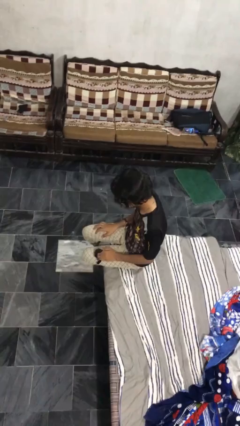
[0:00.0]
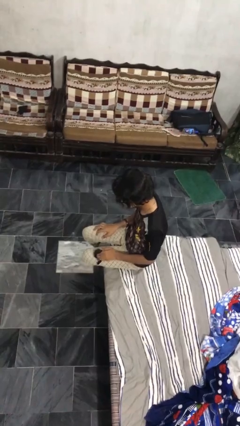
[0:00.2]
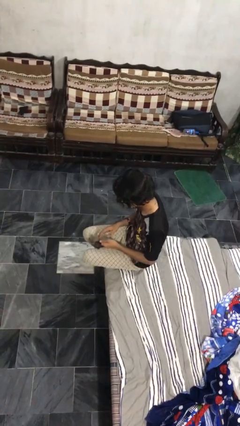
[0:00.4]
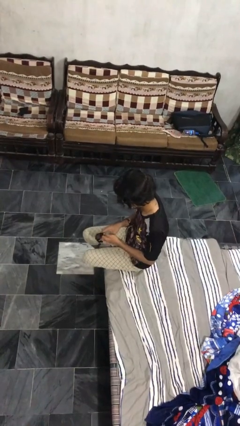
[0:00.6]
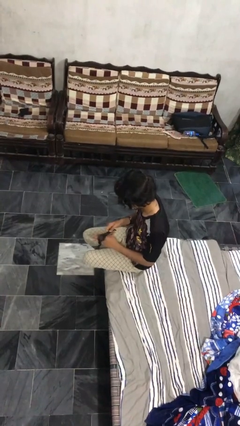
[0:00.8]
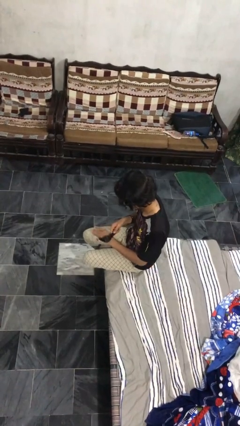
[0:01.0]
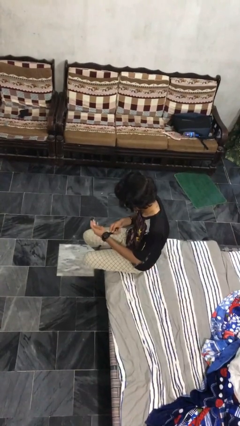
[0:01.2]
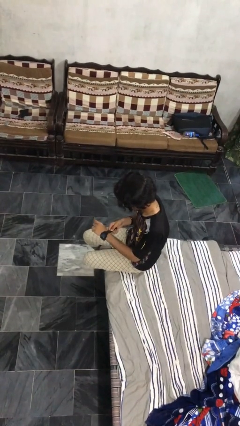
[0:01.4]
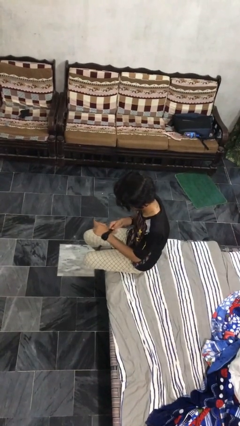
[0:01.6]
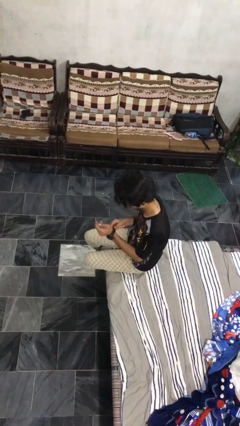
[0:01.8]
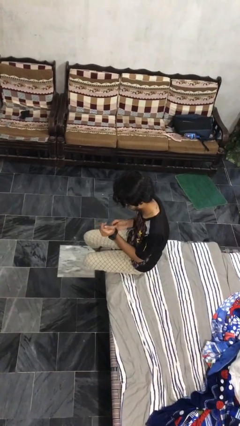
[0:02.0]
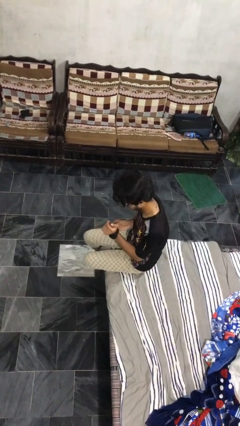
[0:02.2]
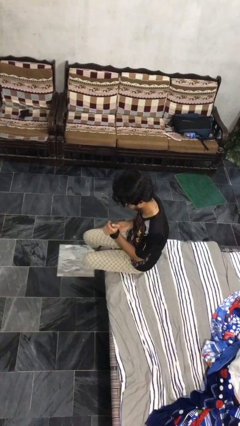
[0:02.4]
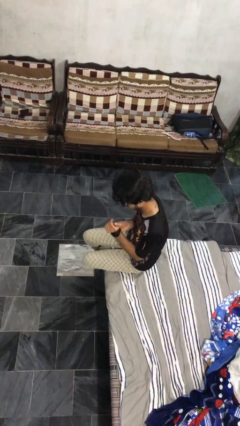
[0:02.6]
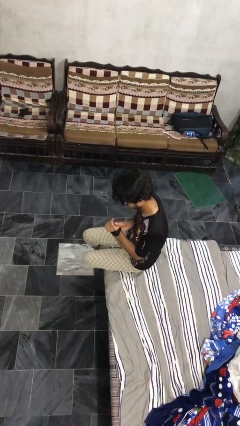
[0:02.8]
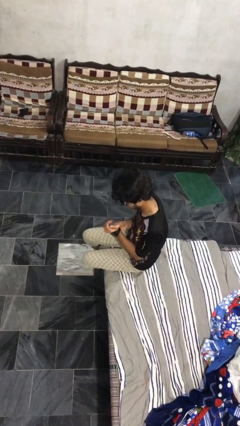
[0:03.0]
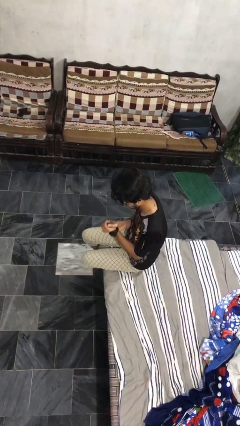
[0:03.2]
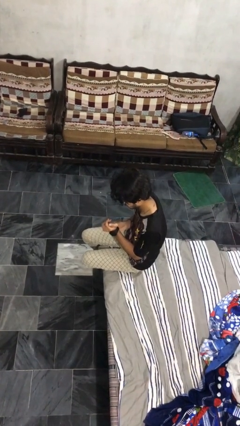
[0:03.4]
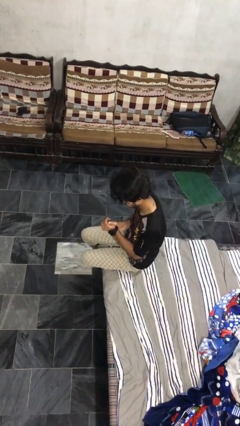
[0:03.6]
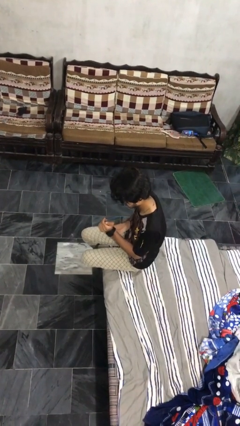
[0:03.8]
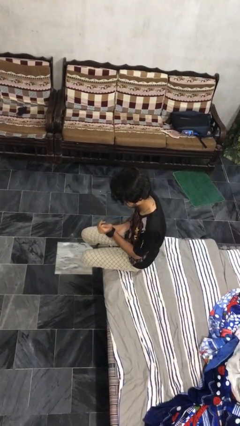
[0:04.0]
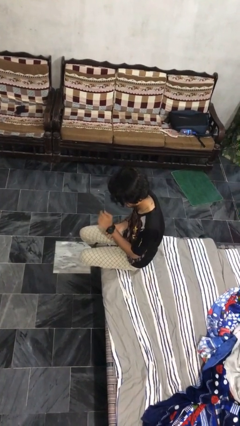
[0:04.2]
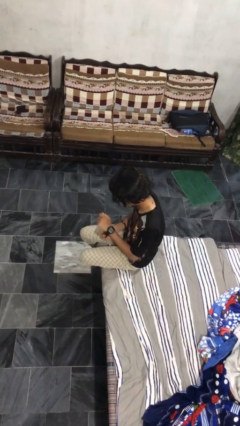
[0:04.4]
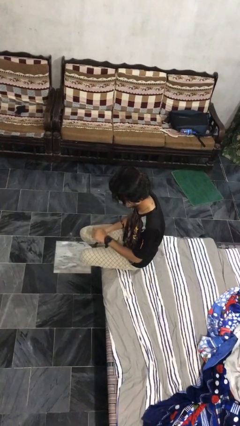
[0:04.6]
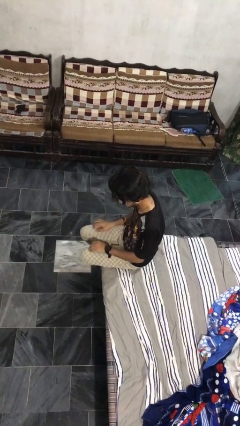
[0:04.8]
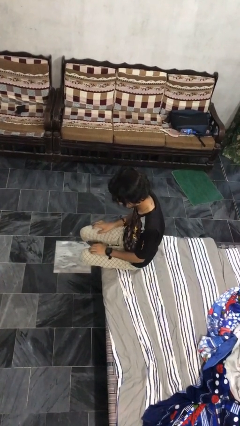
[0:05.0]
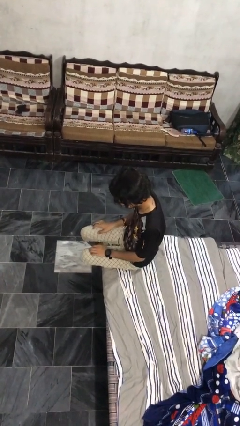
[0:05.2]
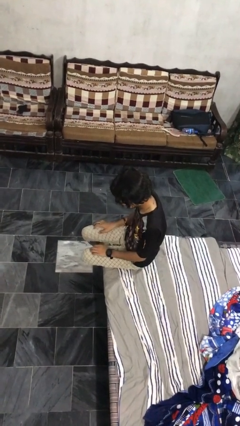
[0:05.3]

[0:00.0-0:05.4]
person puts on wristwatch

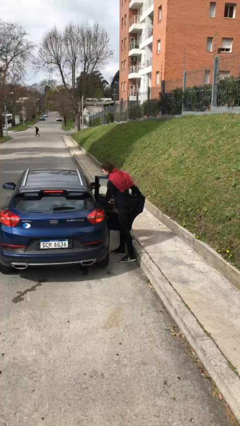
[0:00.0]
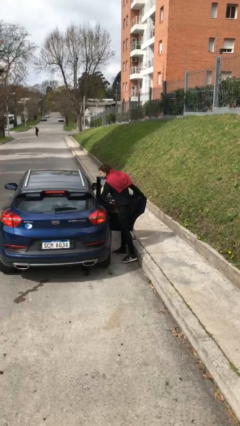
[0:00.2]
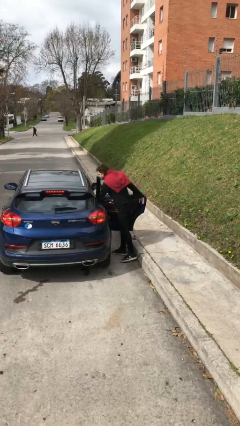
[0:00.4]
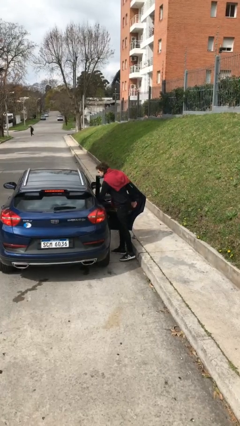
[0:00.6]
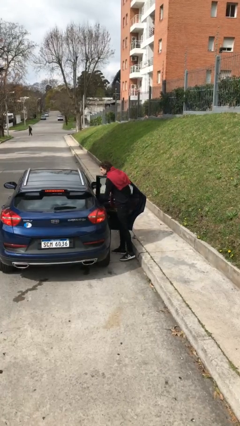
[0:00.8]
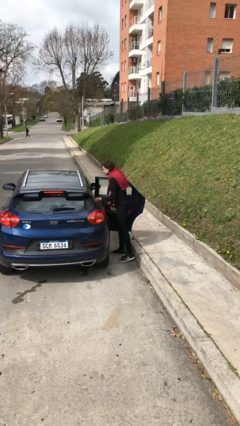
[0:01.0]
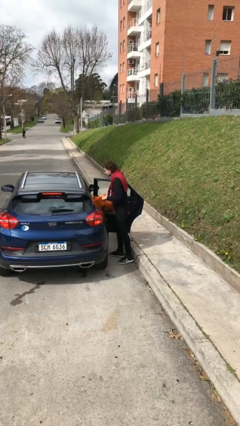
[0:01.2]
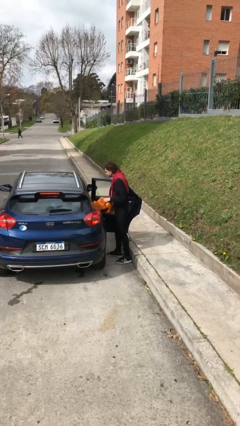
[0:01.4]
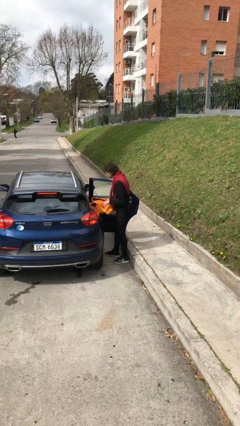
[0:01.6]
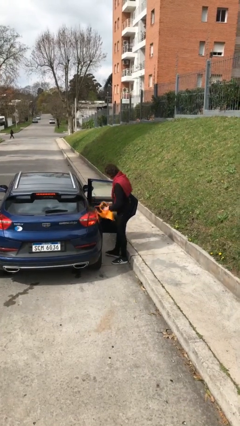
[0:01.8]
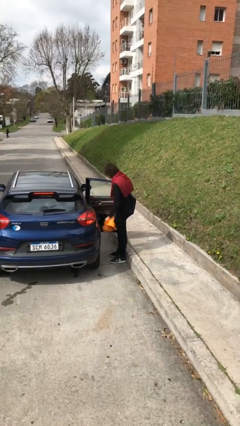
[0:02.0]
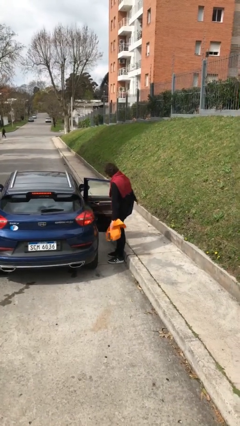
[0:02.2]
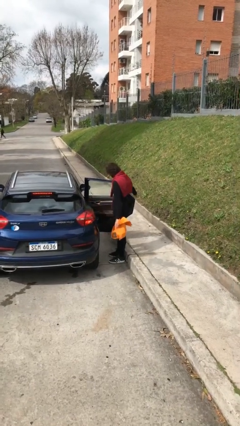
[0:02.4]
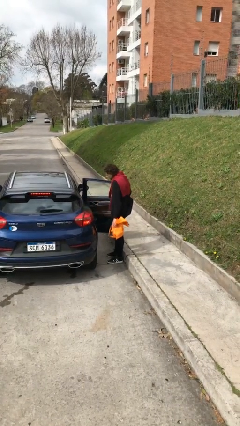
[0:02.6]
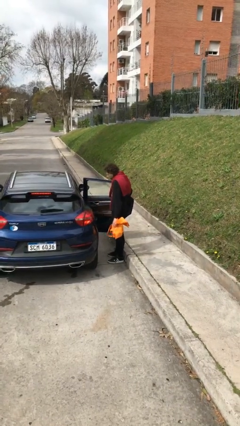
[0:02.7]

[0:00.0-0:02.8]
person unloads car

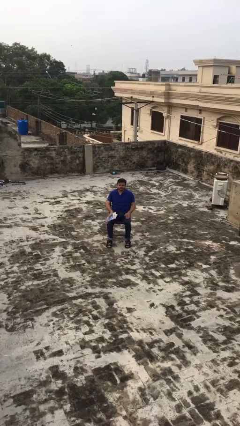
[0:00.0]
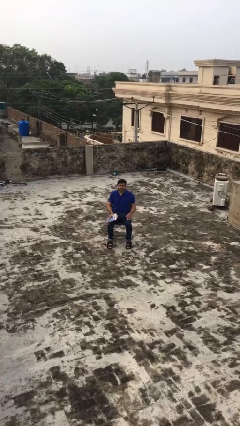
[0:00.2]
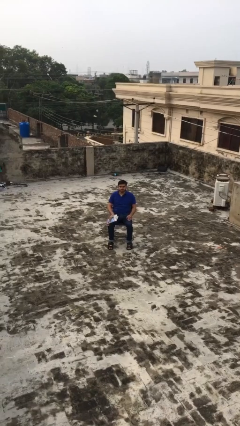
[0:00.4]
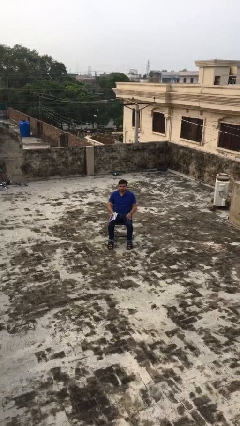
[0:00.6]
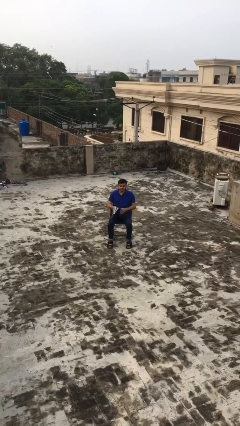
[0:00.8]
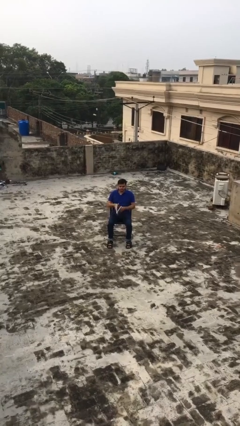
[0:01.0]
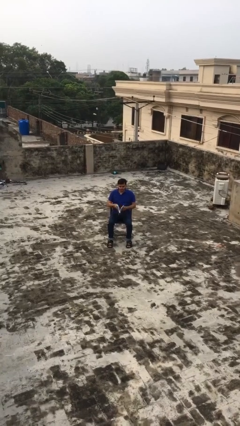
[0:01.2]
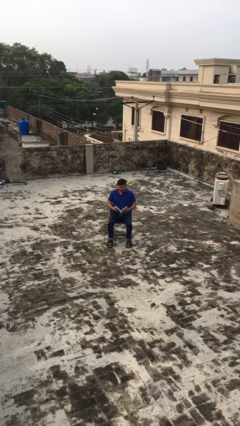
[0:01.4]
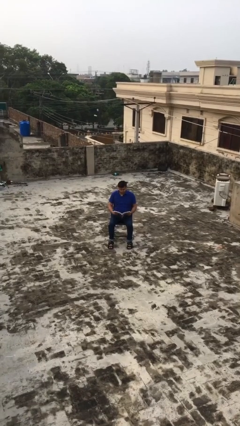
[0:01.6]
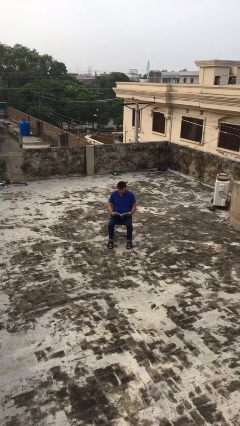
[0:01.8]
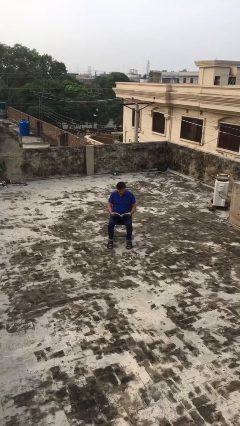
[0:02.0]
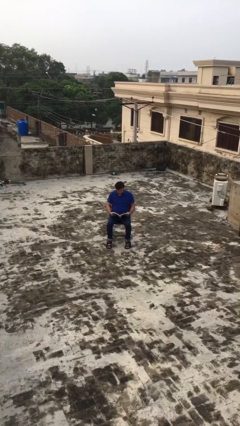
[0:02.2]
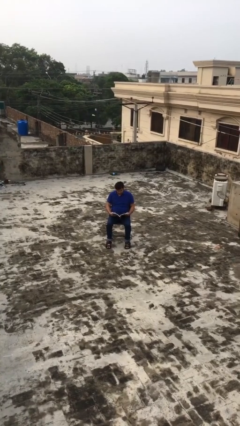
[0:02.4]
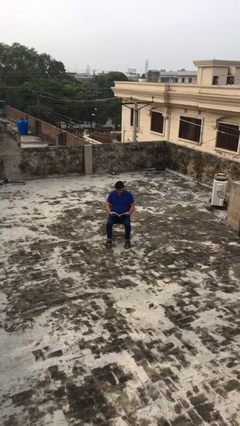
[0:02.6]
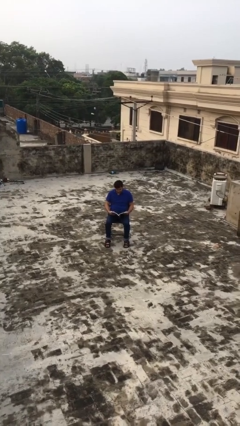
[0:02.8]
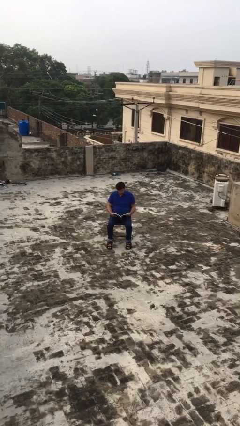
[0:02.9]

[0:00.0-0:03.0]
person reads document

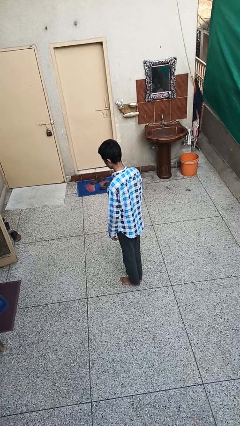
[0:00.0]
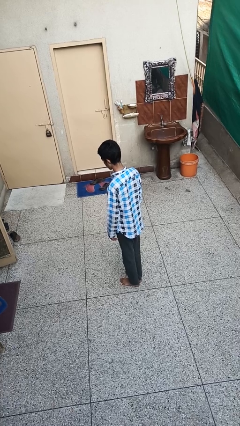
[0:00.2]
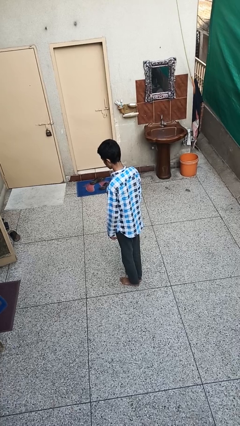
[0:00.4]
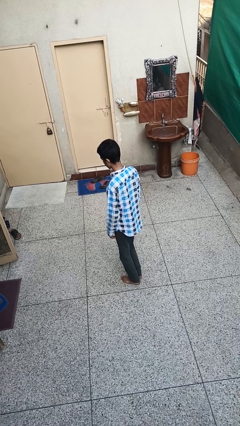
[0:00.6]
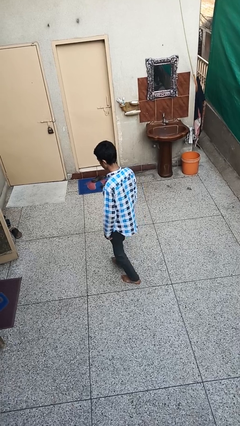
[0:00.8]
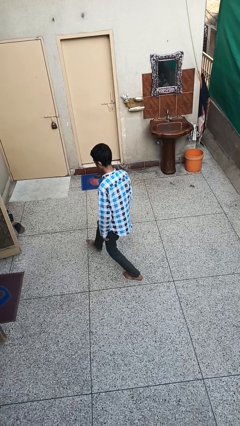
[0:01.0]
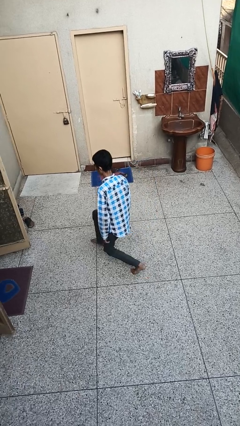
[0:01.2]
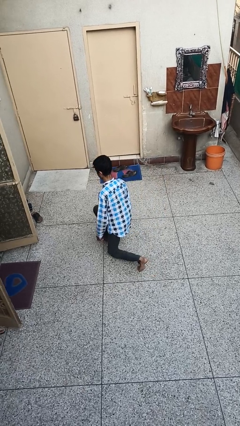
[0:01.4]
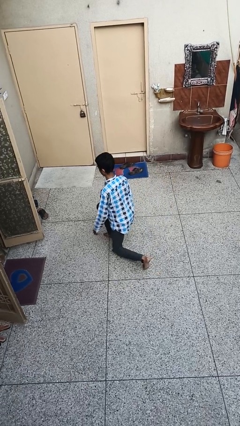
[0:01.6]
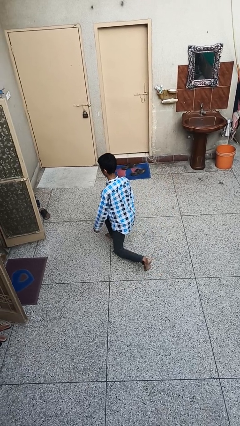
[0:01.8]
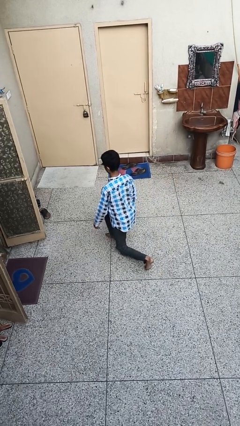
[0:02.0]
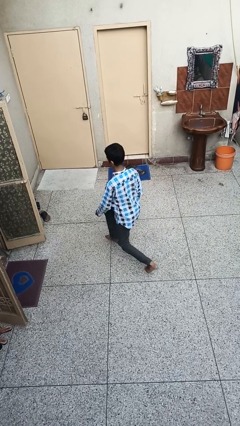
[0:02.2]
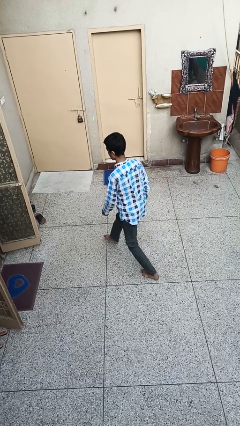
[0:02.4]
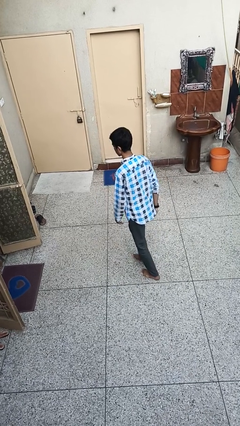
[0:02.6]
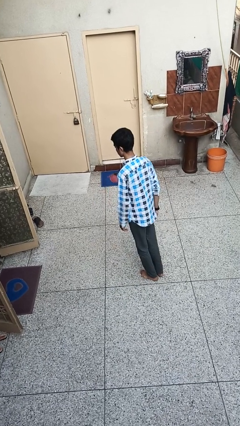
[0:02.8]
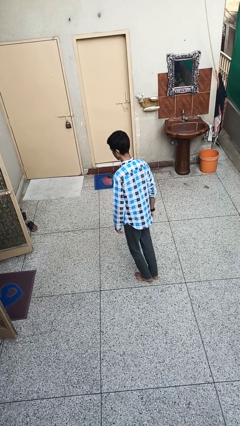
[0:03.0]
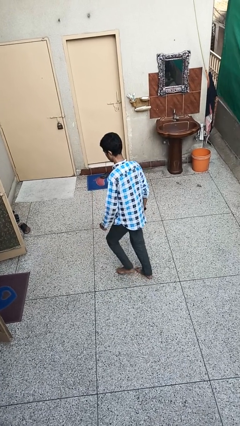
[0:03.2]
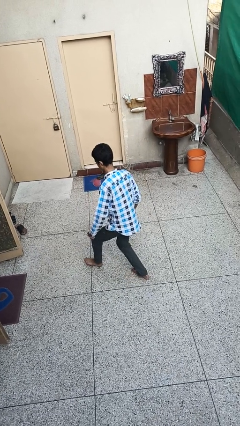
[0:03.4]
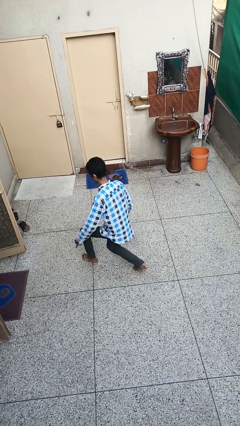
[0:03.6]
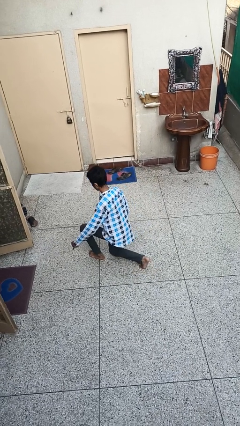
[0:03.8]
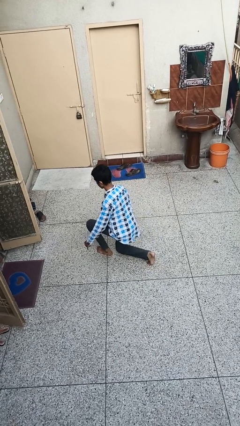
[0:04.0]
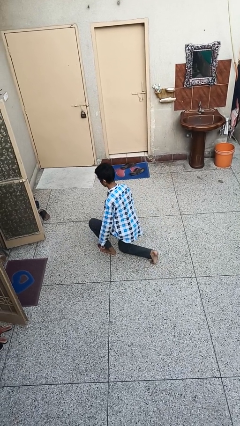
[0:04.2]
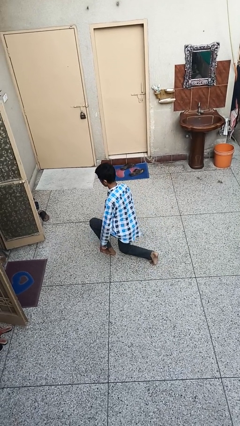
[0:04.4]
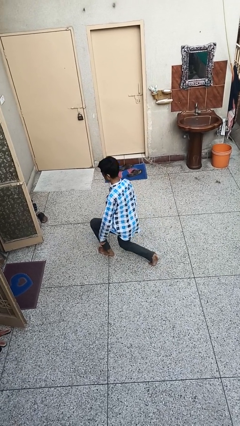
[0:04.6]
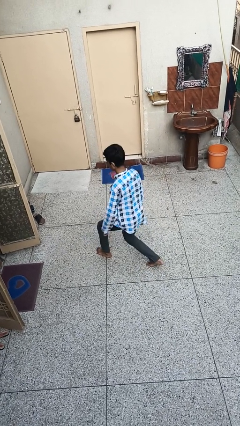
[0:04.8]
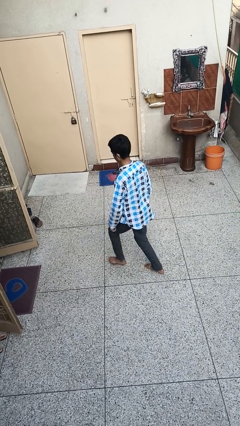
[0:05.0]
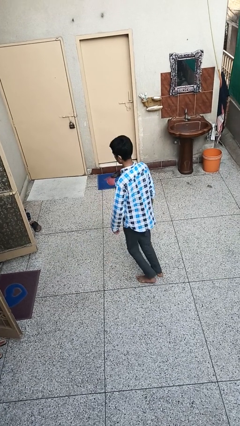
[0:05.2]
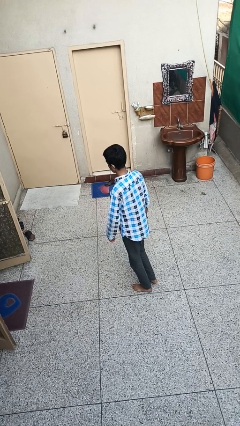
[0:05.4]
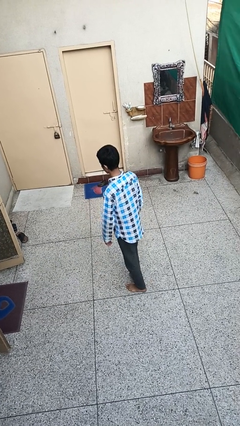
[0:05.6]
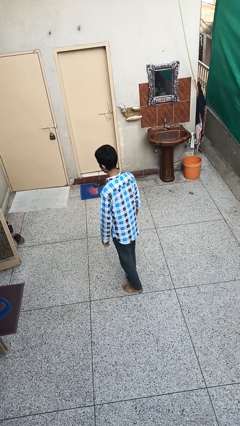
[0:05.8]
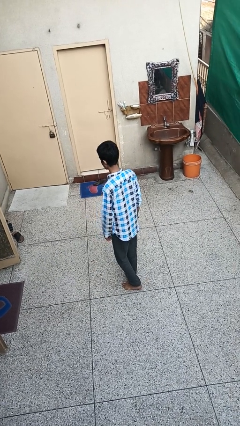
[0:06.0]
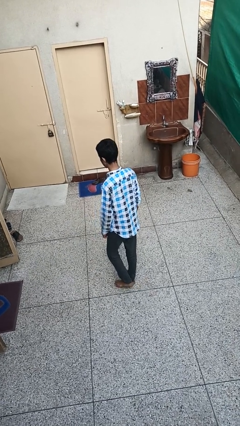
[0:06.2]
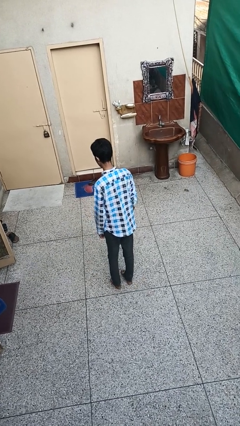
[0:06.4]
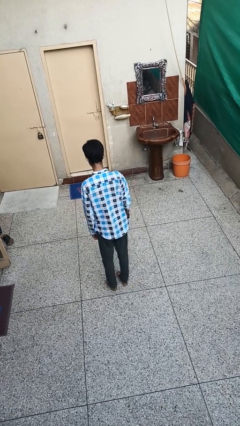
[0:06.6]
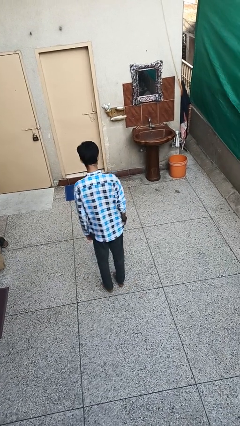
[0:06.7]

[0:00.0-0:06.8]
person exercises with lunges

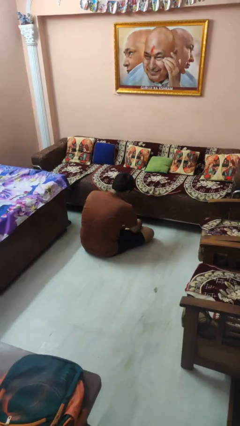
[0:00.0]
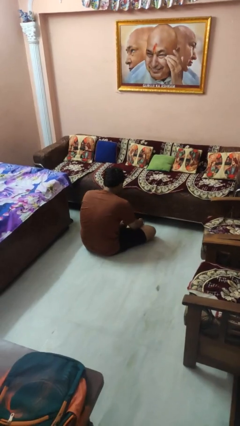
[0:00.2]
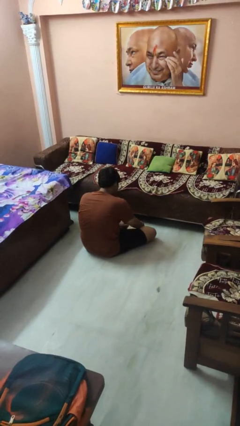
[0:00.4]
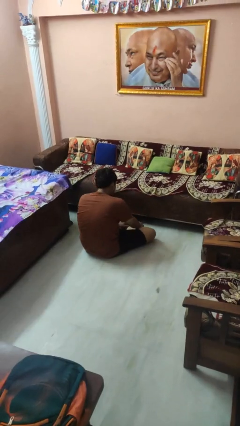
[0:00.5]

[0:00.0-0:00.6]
person searches under couch
